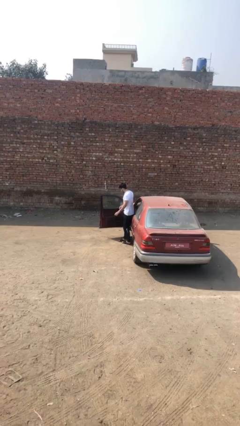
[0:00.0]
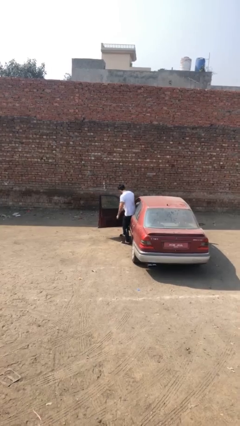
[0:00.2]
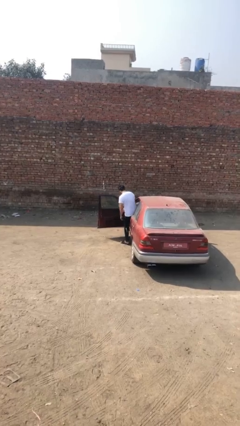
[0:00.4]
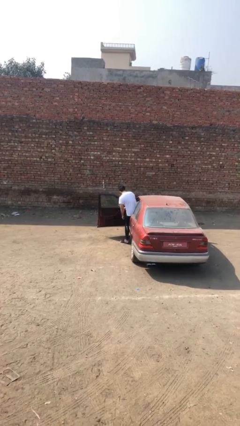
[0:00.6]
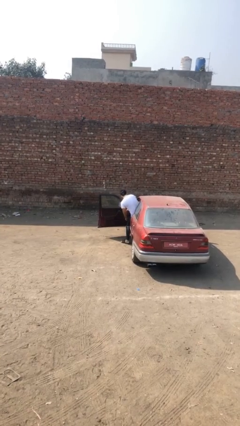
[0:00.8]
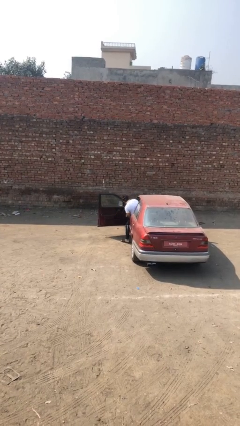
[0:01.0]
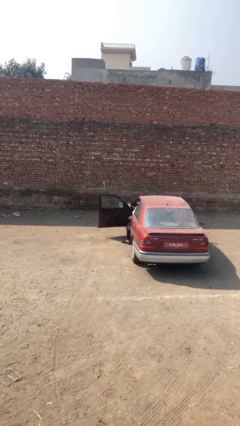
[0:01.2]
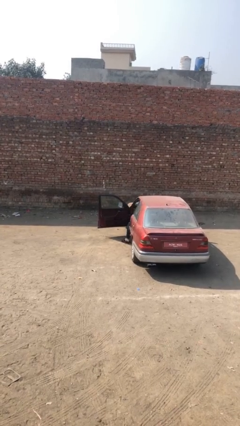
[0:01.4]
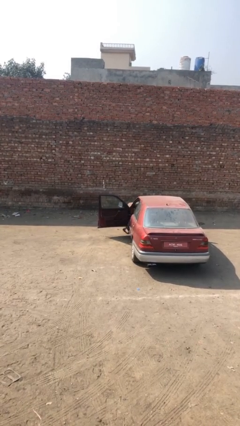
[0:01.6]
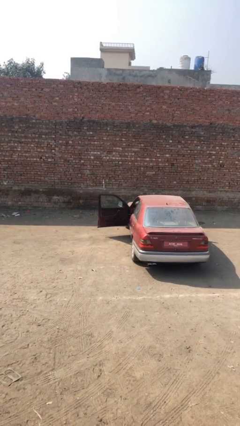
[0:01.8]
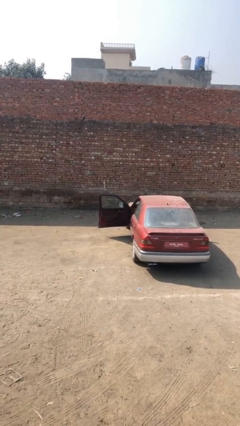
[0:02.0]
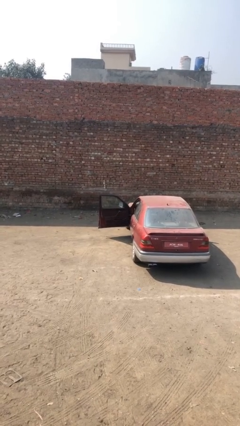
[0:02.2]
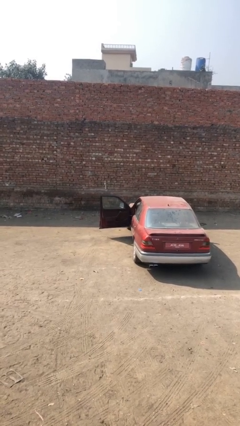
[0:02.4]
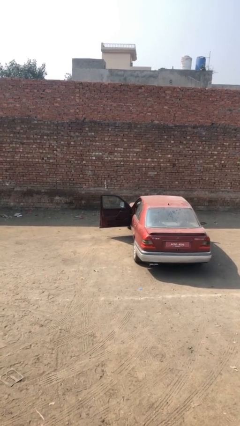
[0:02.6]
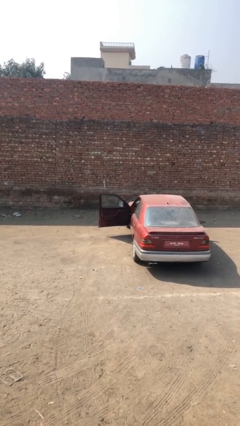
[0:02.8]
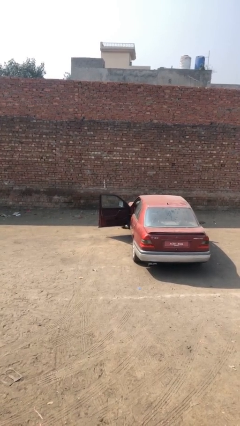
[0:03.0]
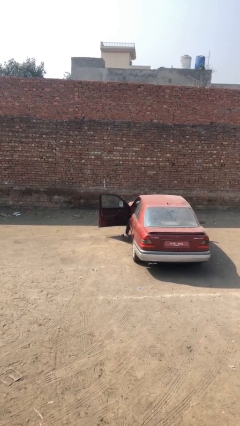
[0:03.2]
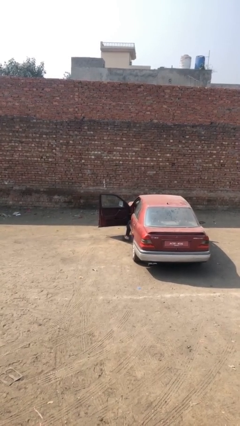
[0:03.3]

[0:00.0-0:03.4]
person enters car

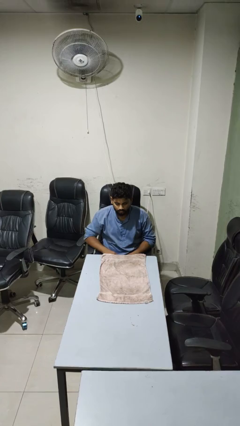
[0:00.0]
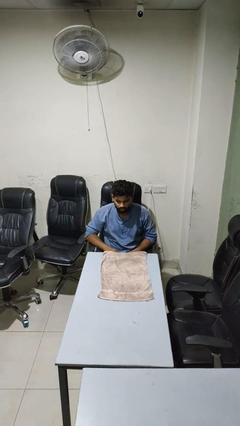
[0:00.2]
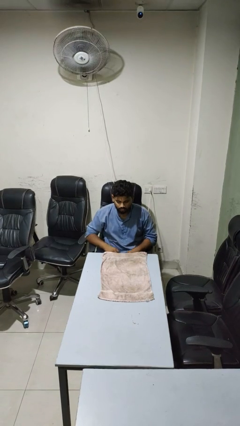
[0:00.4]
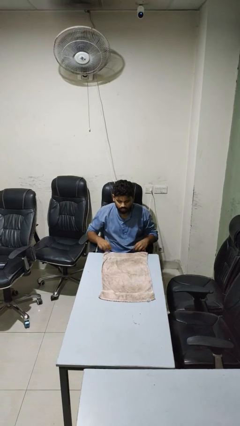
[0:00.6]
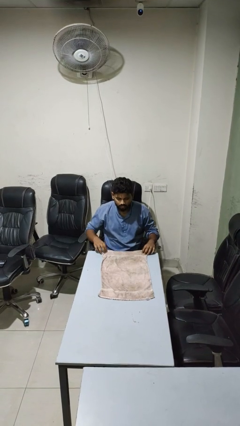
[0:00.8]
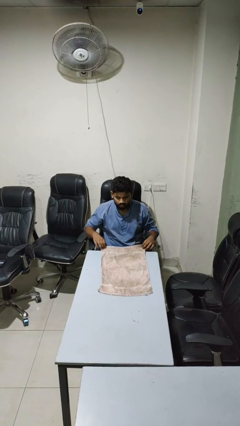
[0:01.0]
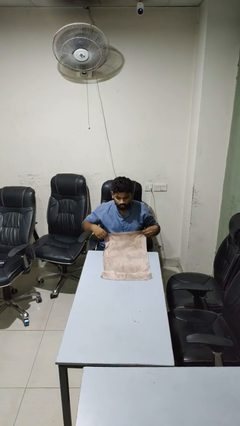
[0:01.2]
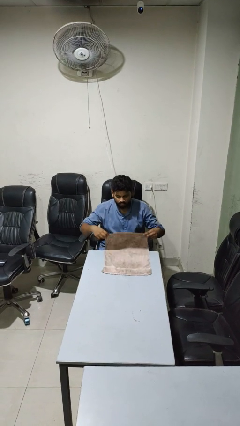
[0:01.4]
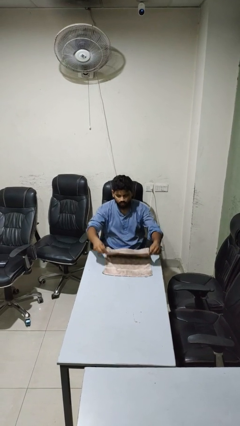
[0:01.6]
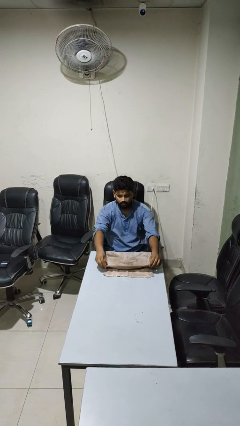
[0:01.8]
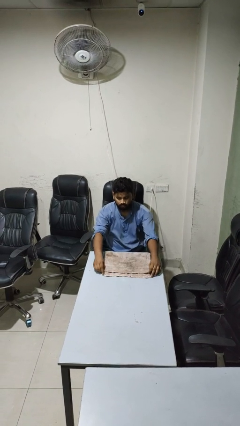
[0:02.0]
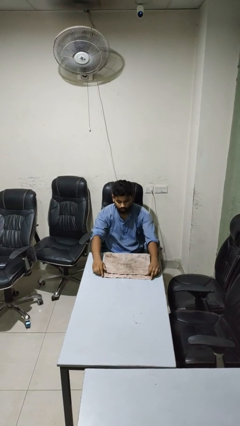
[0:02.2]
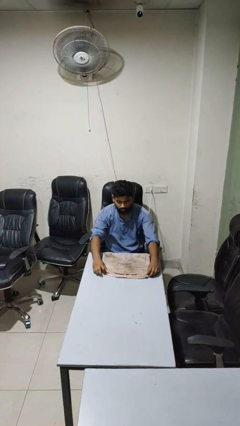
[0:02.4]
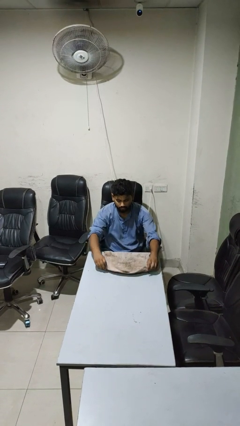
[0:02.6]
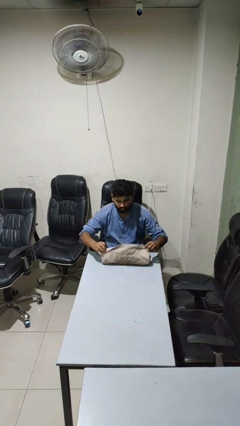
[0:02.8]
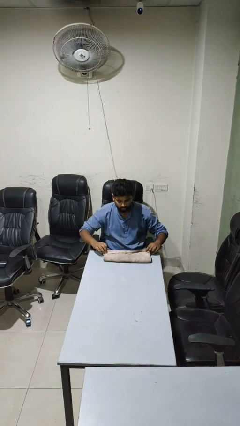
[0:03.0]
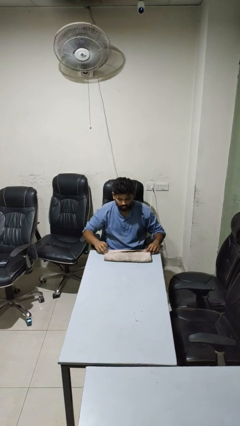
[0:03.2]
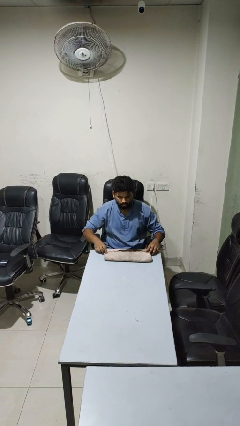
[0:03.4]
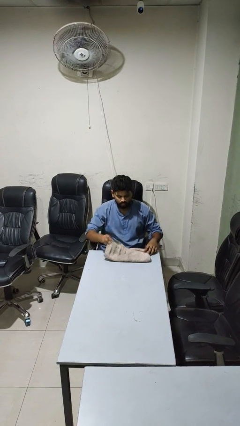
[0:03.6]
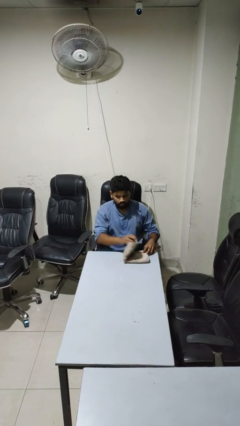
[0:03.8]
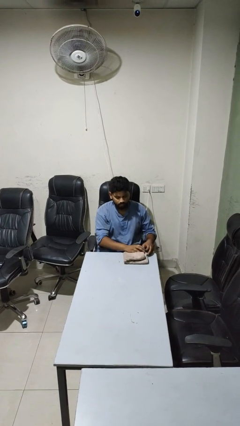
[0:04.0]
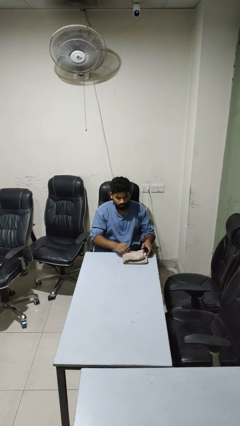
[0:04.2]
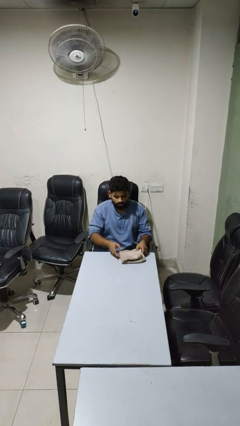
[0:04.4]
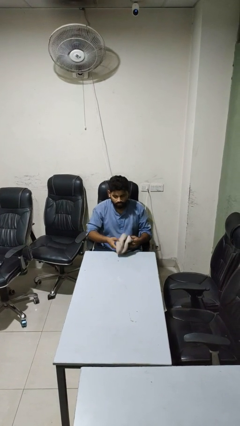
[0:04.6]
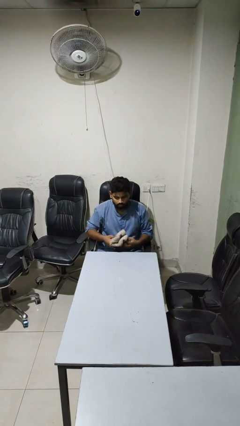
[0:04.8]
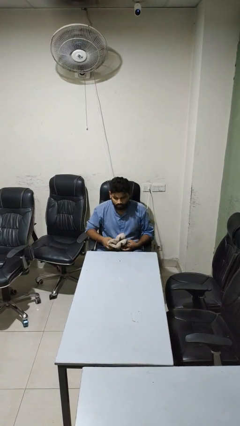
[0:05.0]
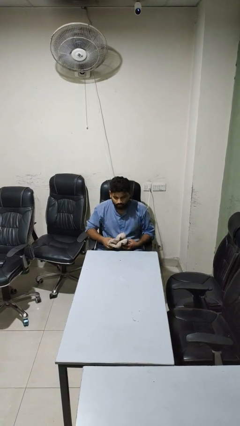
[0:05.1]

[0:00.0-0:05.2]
person folds tablecloth

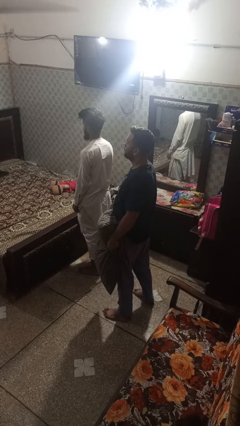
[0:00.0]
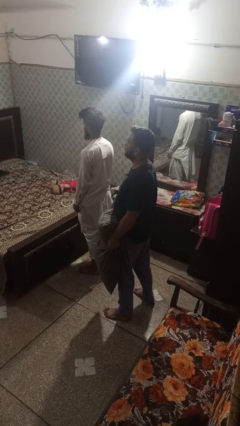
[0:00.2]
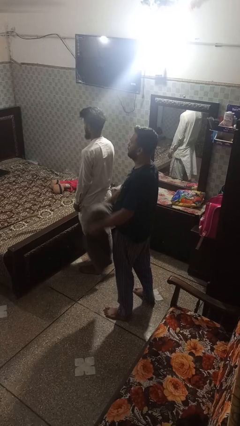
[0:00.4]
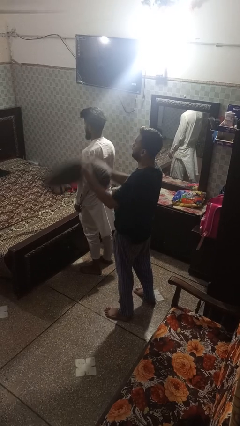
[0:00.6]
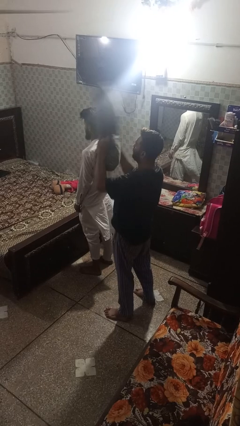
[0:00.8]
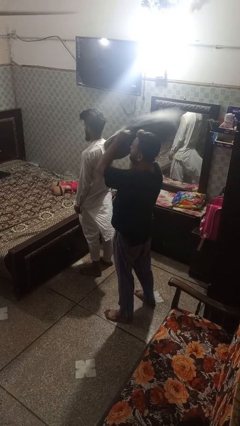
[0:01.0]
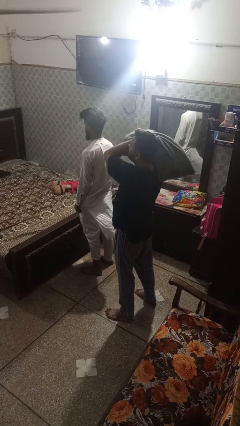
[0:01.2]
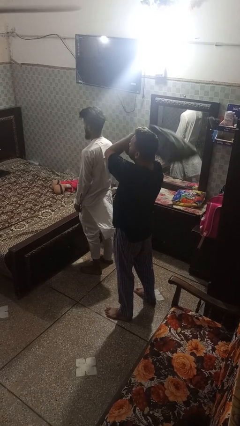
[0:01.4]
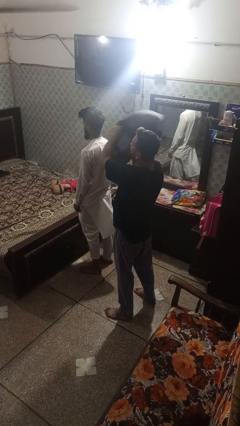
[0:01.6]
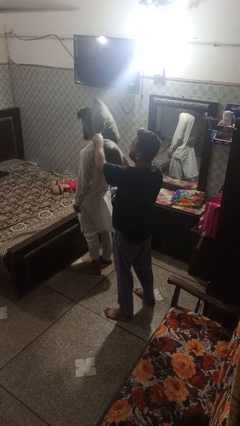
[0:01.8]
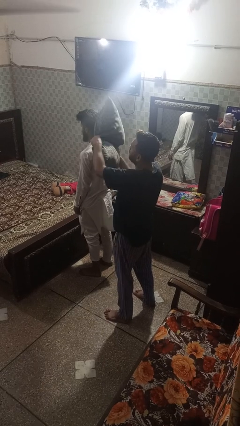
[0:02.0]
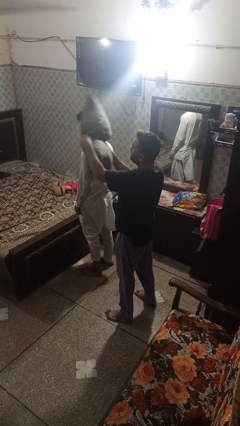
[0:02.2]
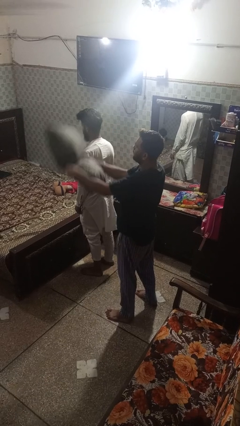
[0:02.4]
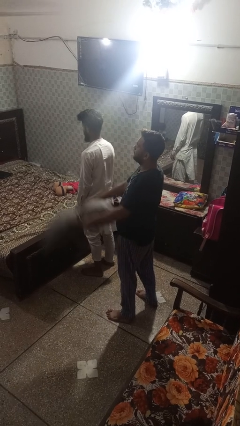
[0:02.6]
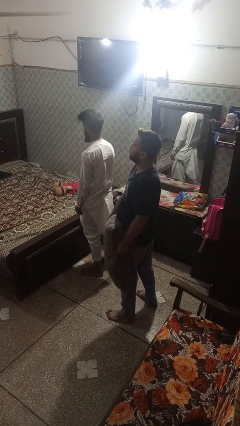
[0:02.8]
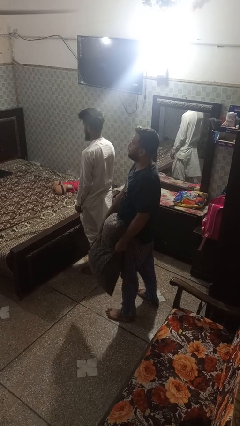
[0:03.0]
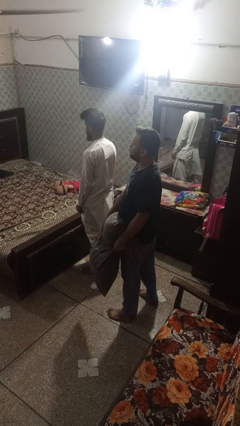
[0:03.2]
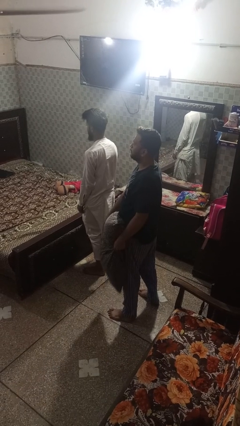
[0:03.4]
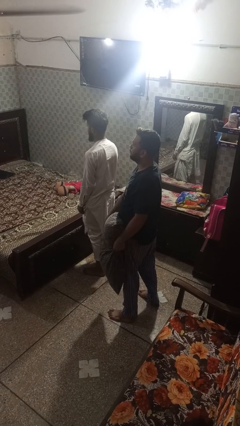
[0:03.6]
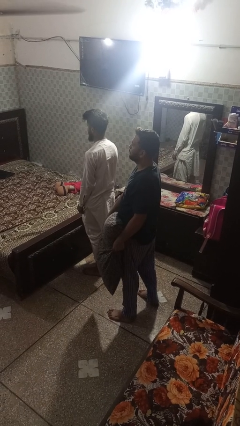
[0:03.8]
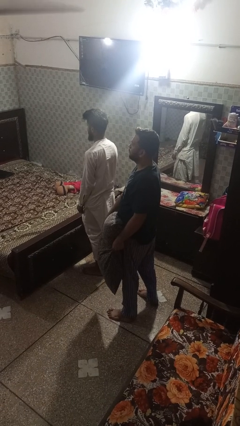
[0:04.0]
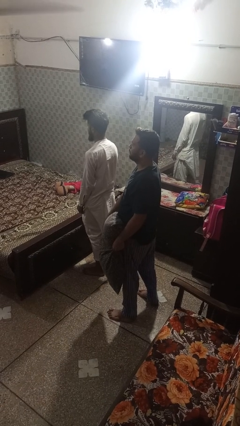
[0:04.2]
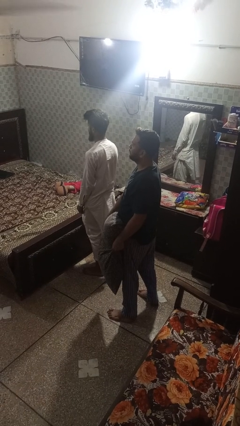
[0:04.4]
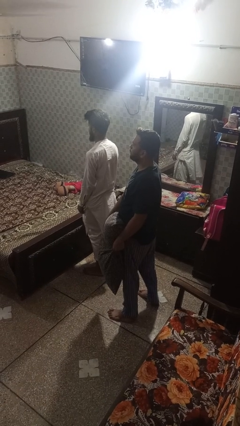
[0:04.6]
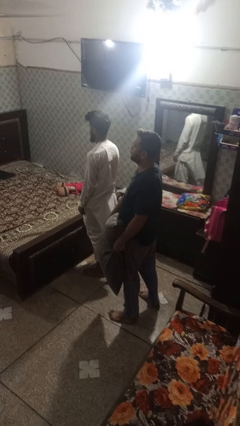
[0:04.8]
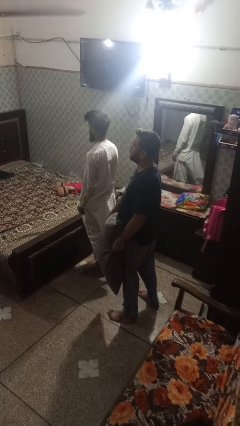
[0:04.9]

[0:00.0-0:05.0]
person hits person with pillow

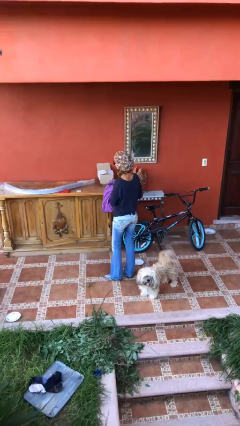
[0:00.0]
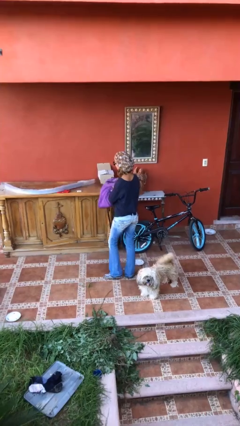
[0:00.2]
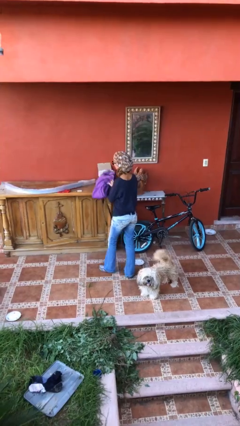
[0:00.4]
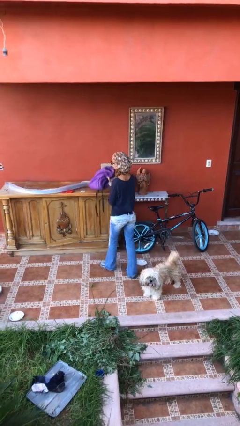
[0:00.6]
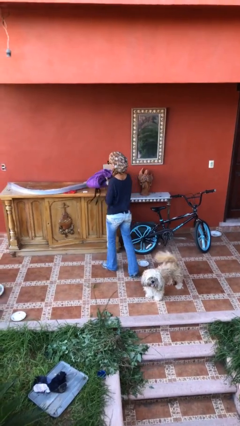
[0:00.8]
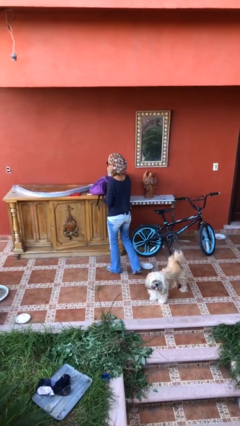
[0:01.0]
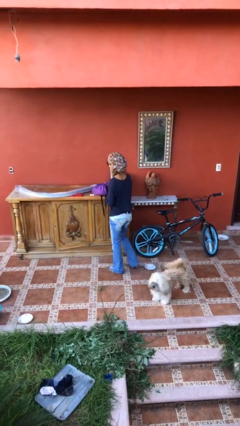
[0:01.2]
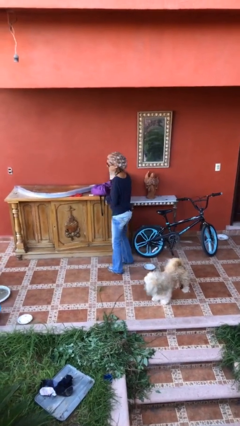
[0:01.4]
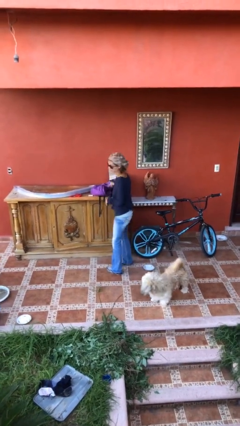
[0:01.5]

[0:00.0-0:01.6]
person puts down object on table

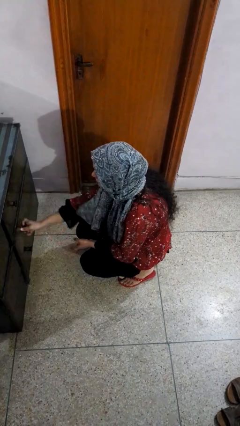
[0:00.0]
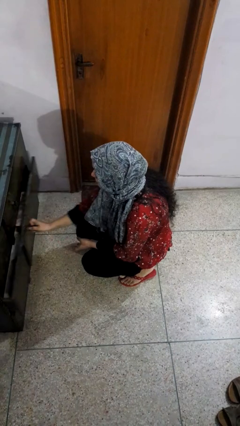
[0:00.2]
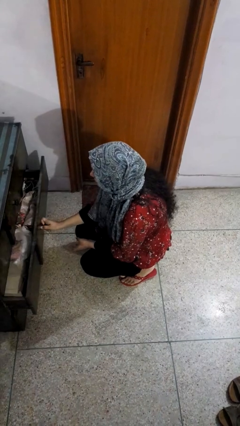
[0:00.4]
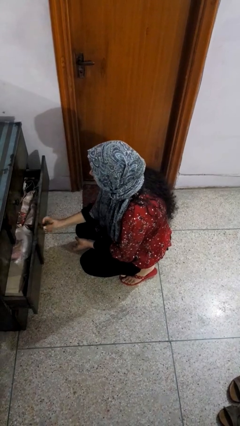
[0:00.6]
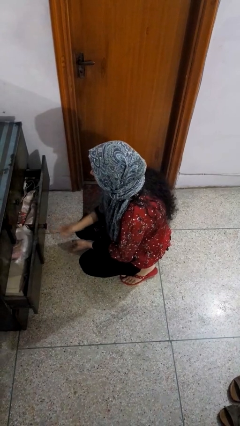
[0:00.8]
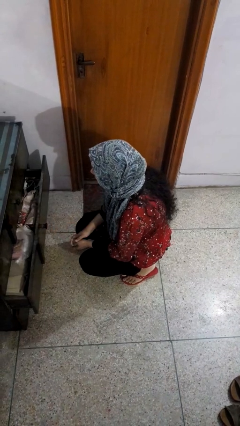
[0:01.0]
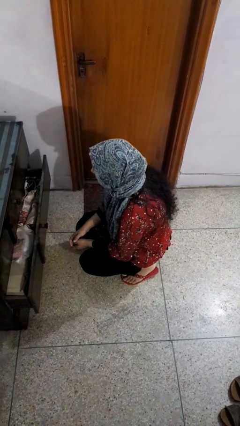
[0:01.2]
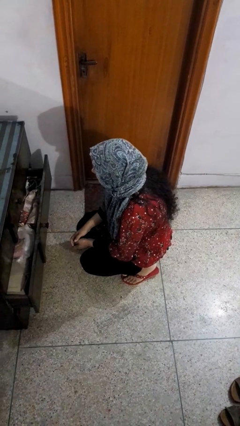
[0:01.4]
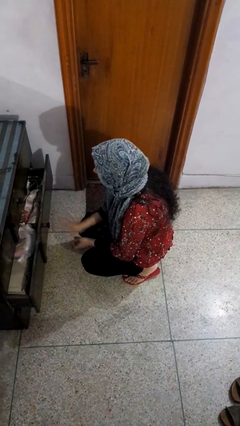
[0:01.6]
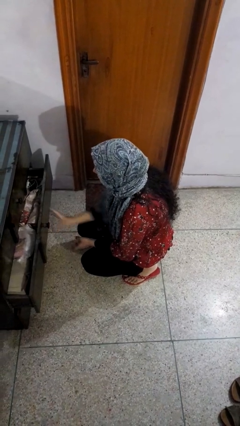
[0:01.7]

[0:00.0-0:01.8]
person opens dresser drawer

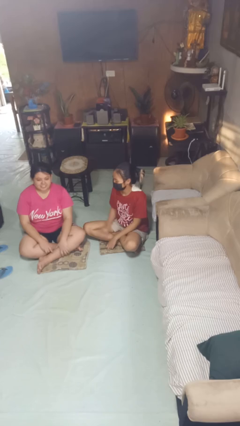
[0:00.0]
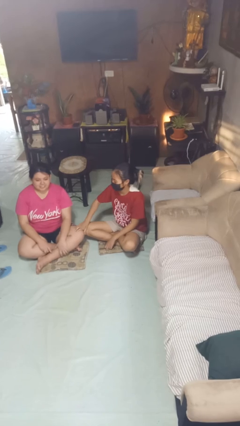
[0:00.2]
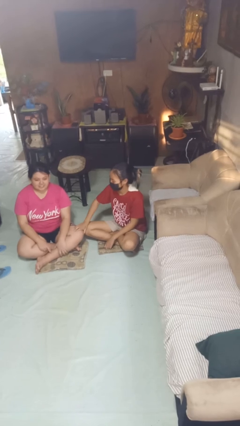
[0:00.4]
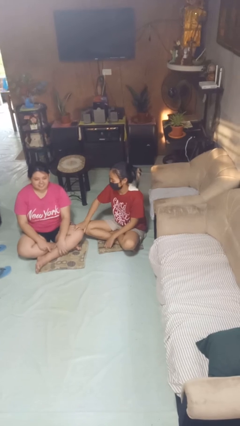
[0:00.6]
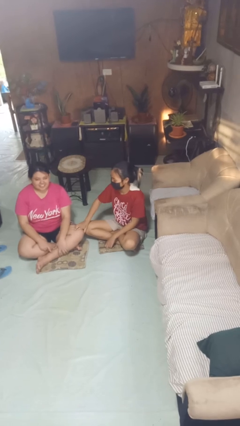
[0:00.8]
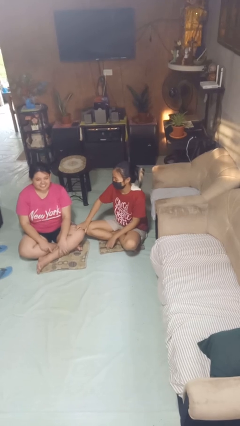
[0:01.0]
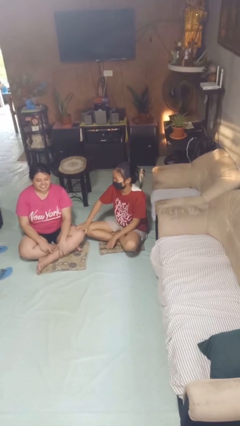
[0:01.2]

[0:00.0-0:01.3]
person tickles person
